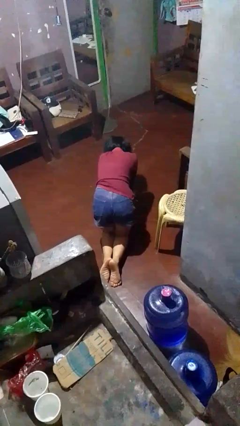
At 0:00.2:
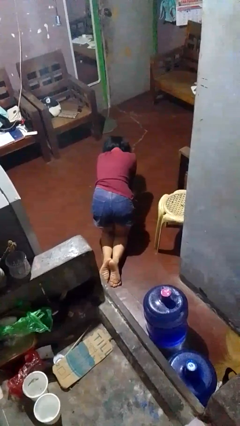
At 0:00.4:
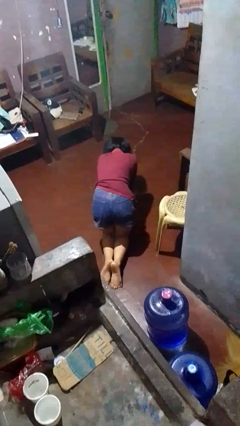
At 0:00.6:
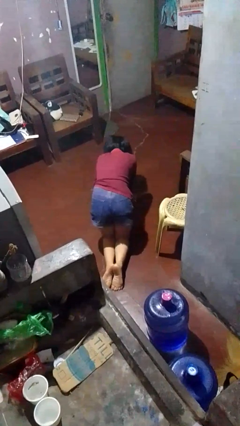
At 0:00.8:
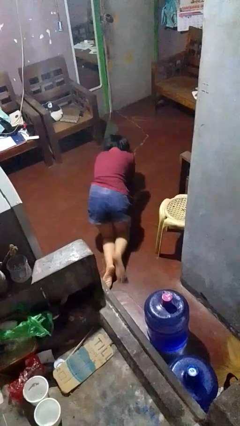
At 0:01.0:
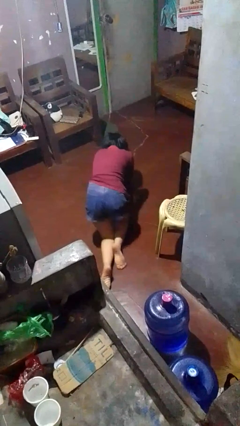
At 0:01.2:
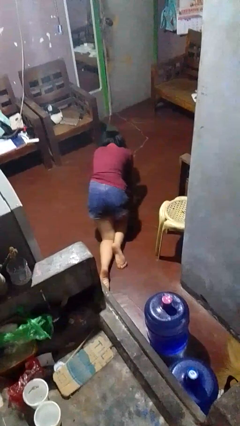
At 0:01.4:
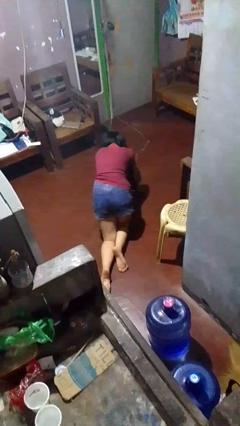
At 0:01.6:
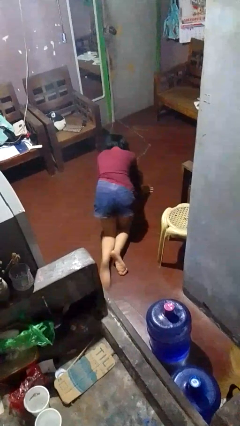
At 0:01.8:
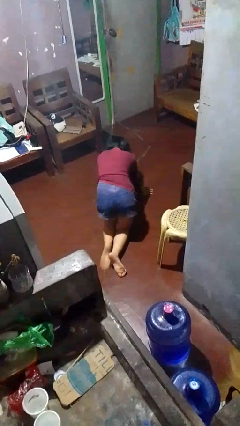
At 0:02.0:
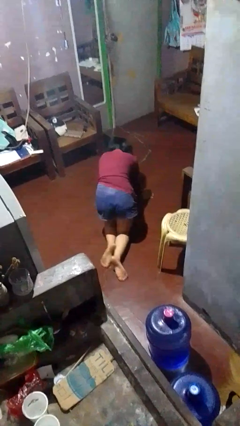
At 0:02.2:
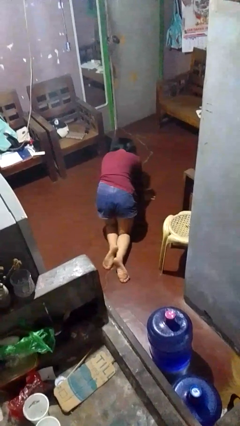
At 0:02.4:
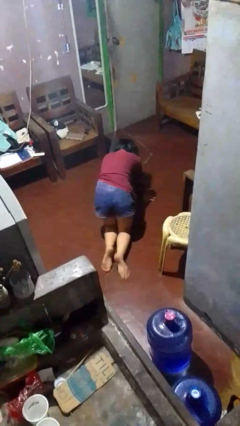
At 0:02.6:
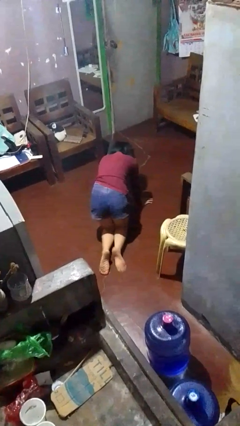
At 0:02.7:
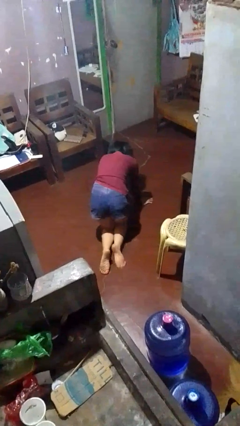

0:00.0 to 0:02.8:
person crawls

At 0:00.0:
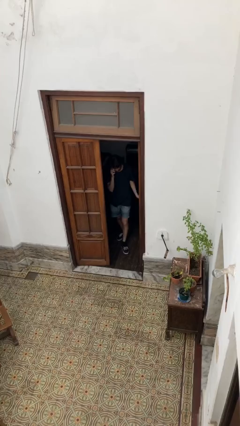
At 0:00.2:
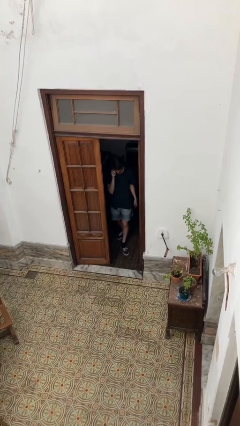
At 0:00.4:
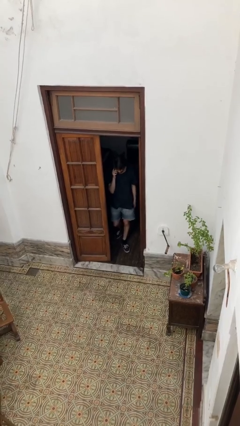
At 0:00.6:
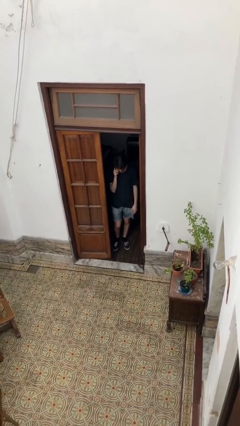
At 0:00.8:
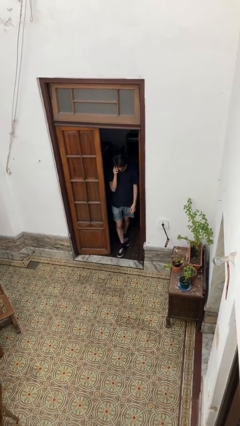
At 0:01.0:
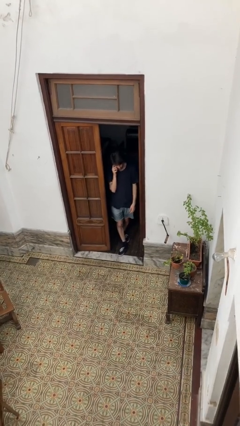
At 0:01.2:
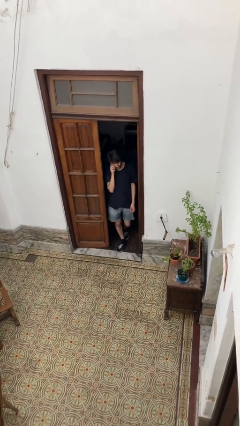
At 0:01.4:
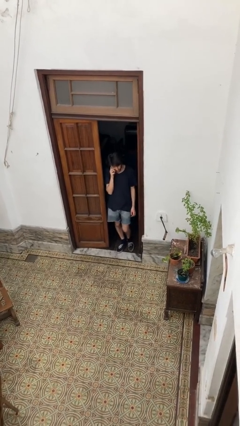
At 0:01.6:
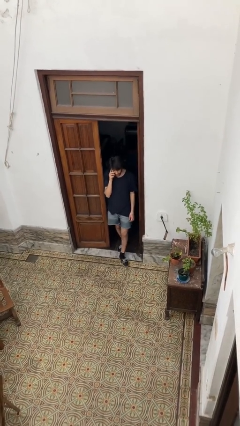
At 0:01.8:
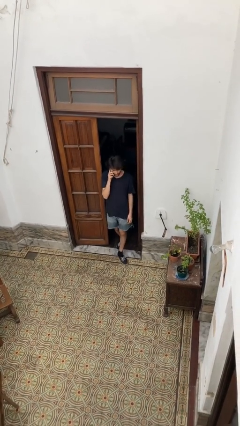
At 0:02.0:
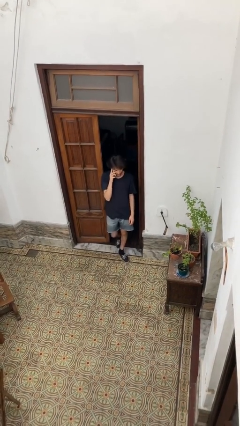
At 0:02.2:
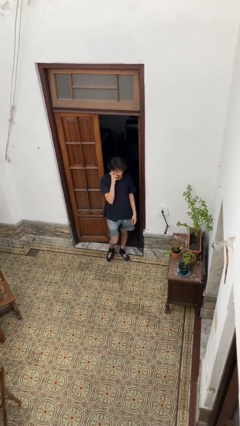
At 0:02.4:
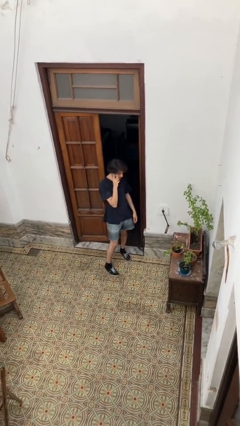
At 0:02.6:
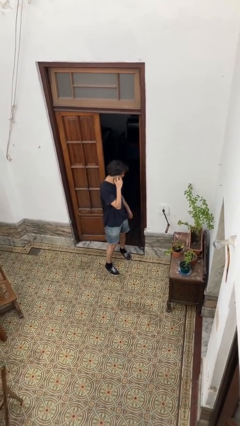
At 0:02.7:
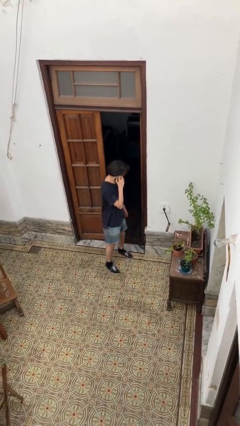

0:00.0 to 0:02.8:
person enters scene through structure

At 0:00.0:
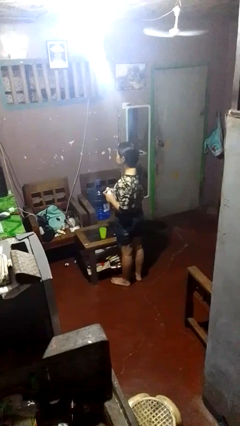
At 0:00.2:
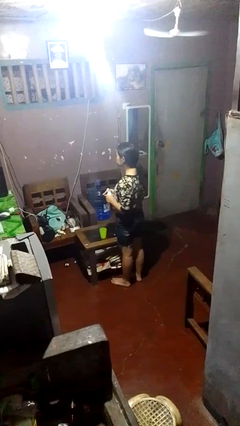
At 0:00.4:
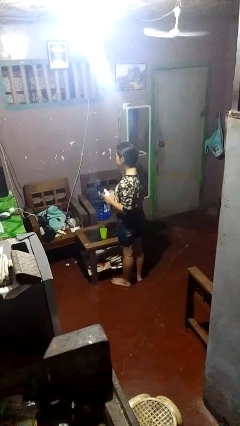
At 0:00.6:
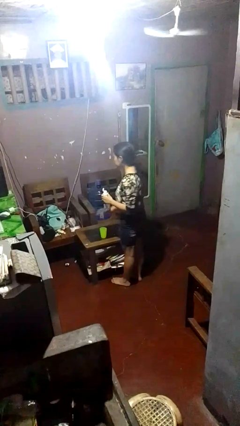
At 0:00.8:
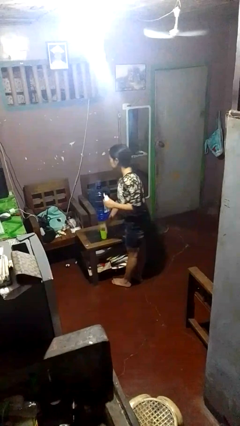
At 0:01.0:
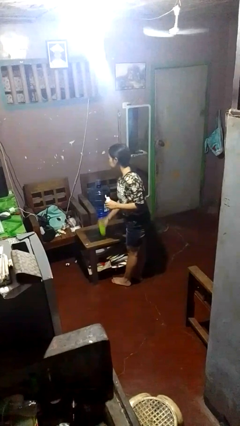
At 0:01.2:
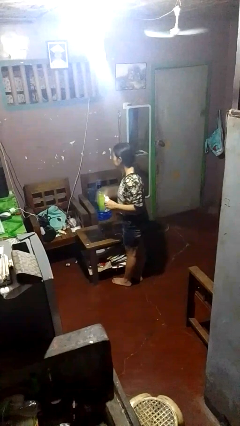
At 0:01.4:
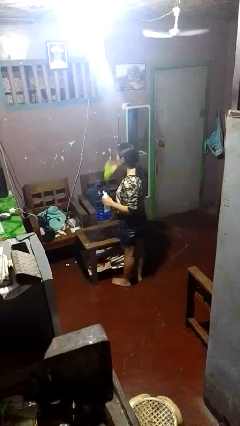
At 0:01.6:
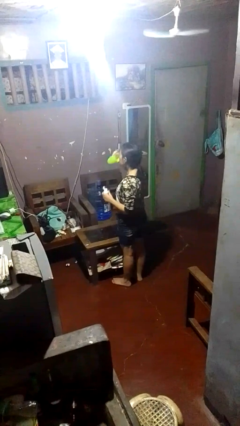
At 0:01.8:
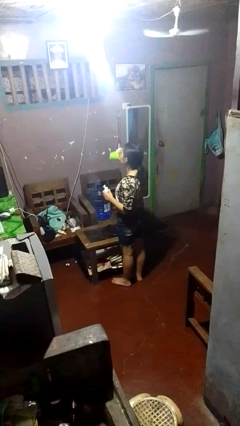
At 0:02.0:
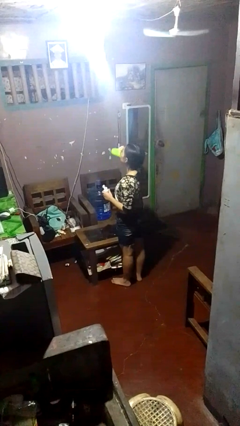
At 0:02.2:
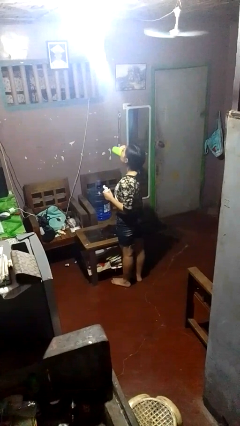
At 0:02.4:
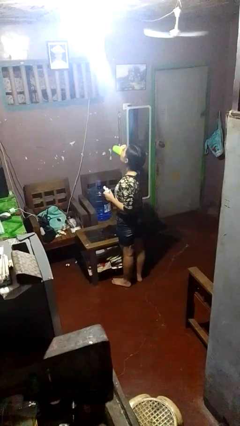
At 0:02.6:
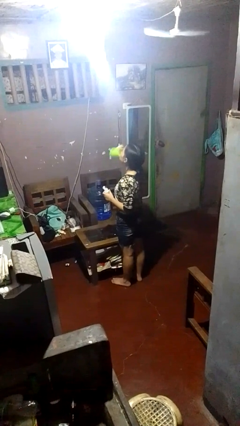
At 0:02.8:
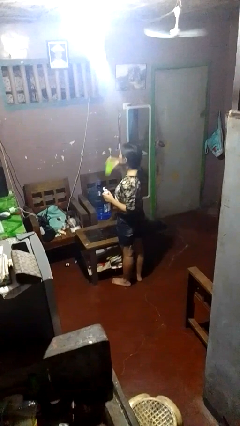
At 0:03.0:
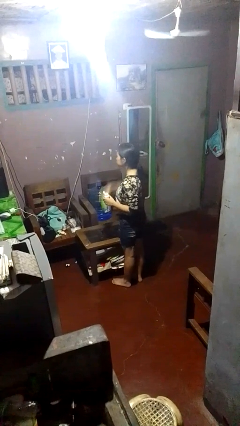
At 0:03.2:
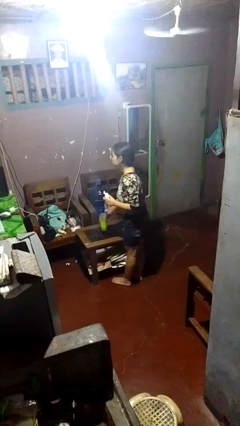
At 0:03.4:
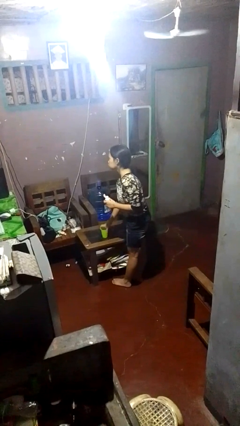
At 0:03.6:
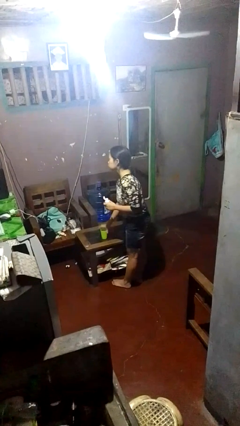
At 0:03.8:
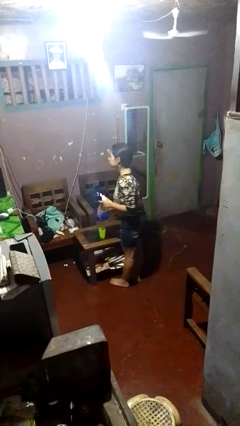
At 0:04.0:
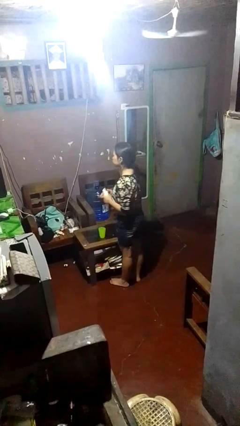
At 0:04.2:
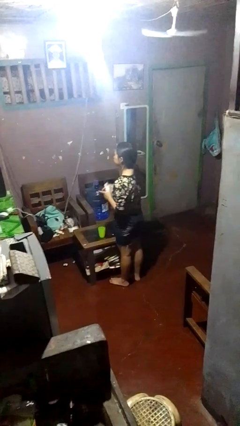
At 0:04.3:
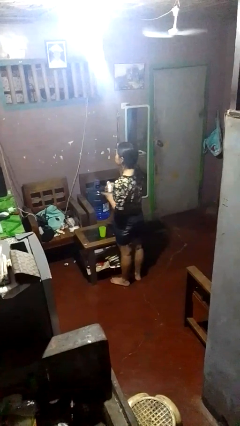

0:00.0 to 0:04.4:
person drinks from cup

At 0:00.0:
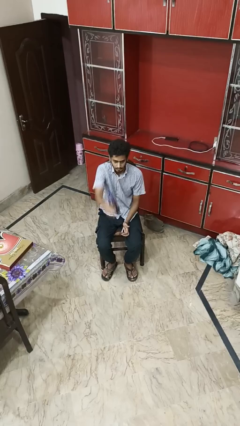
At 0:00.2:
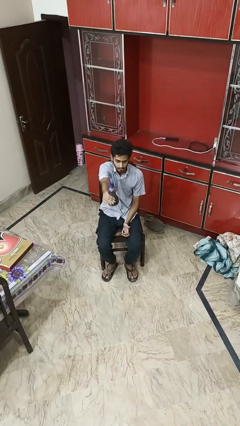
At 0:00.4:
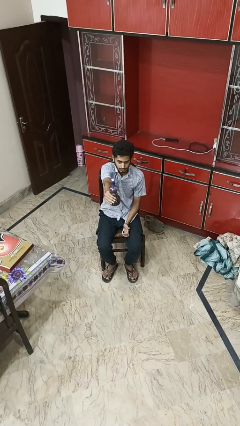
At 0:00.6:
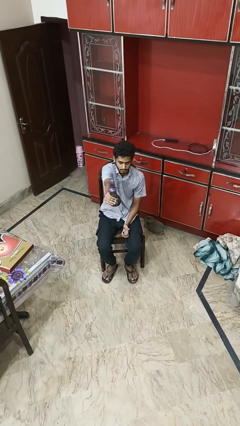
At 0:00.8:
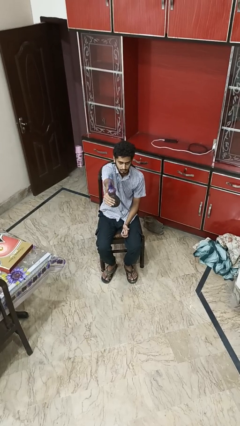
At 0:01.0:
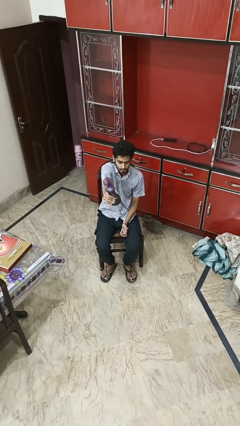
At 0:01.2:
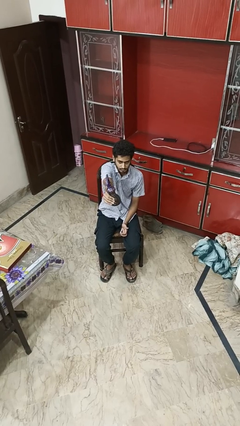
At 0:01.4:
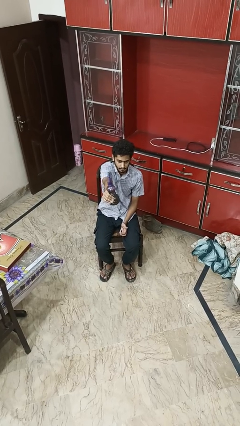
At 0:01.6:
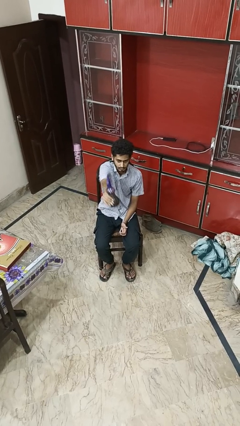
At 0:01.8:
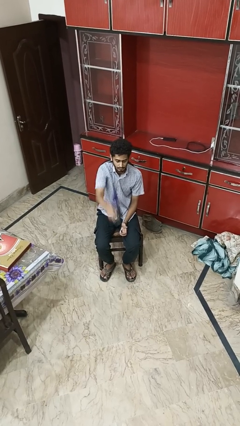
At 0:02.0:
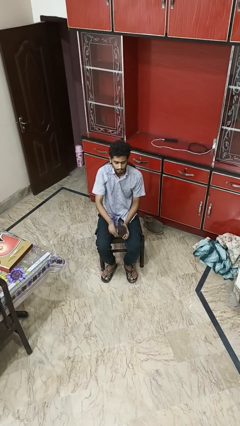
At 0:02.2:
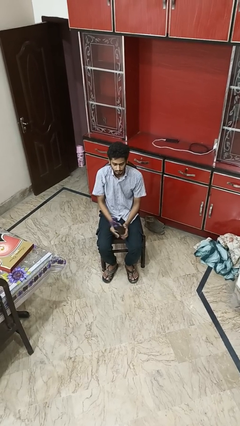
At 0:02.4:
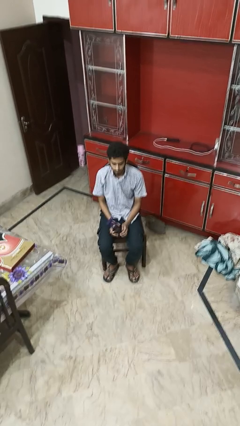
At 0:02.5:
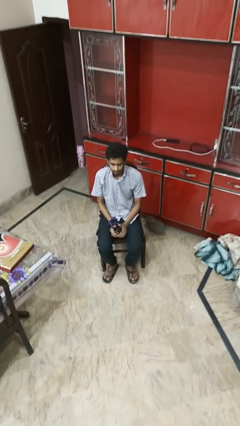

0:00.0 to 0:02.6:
person squeezes object

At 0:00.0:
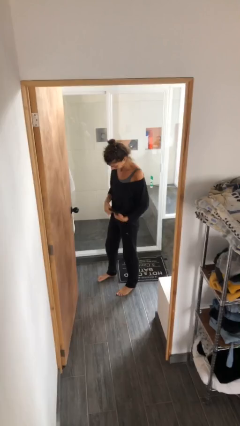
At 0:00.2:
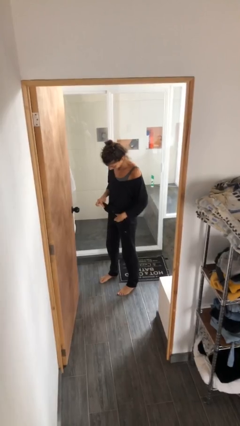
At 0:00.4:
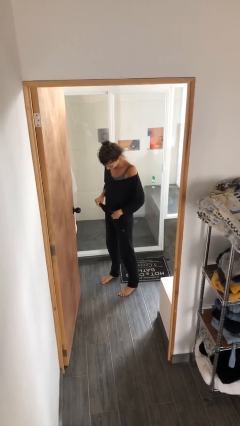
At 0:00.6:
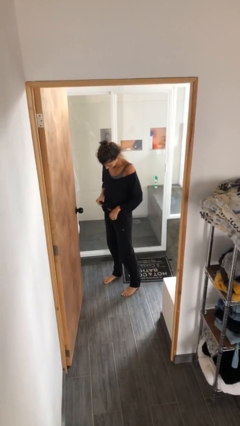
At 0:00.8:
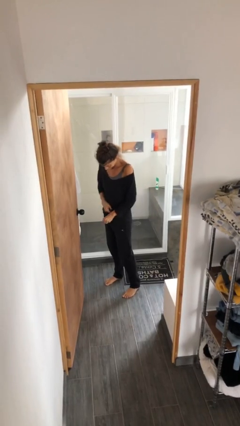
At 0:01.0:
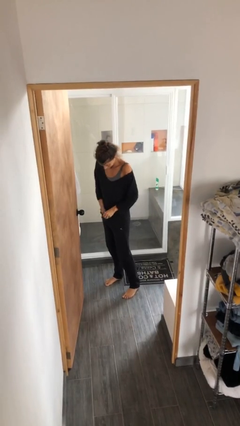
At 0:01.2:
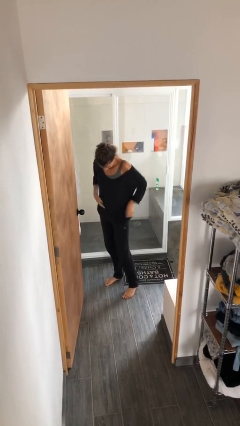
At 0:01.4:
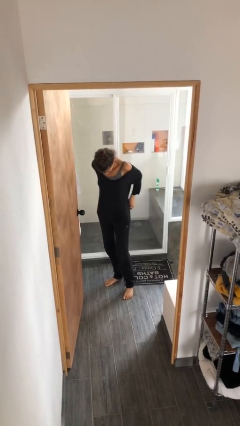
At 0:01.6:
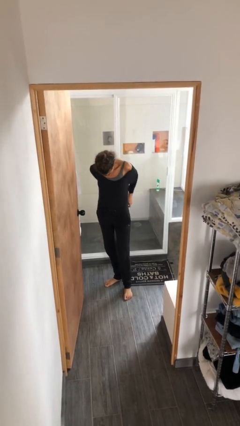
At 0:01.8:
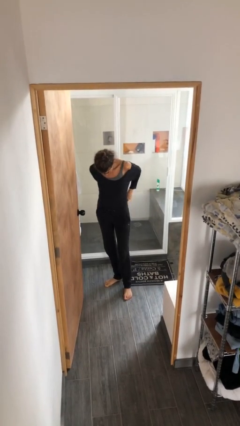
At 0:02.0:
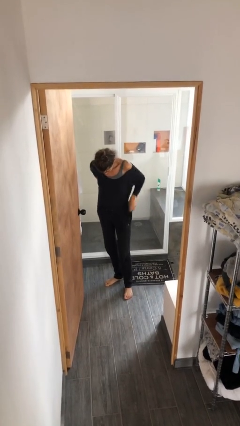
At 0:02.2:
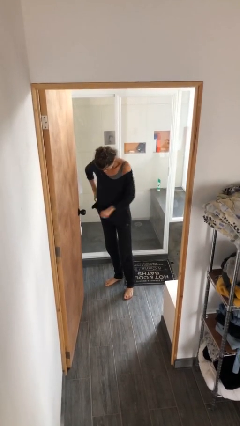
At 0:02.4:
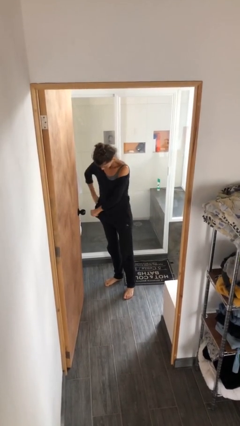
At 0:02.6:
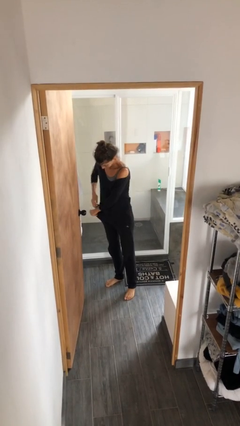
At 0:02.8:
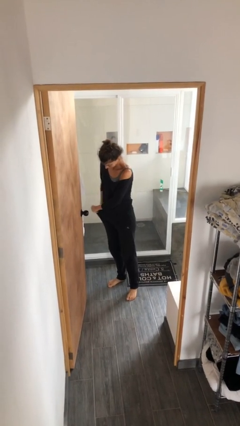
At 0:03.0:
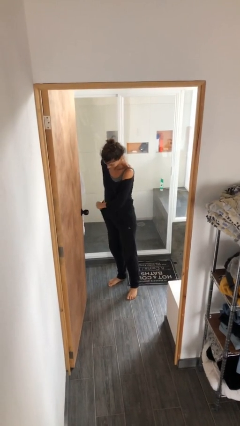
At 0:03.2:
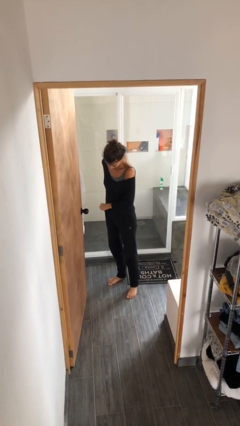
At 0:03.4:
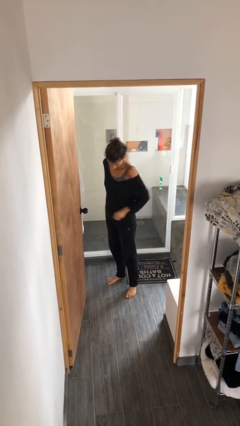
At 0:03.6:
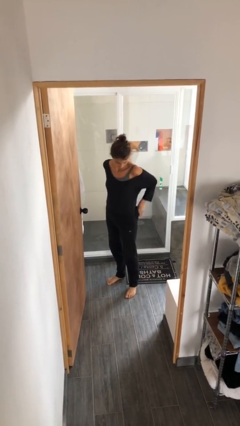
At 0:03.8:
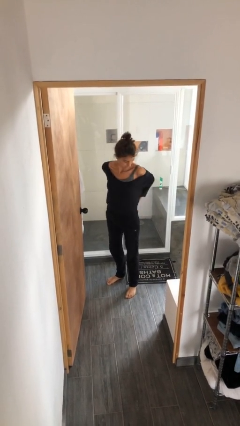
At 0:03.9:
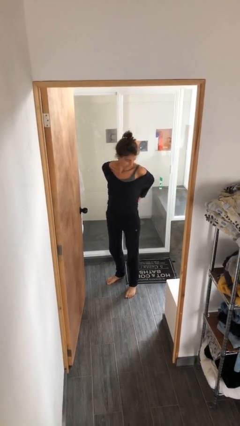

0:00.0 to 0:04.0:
person tucks in shirt

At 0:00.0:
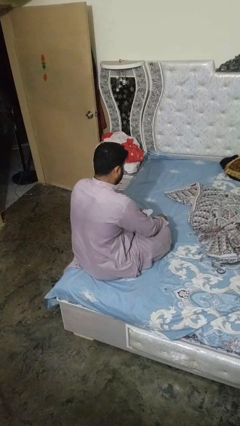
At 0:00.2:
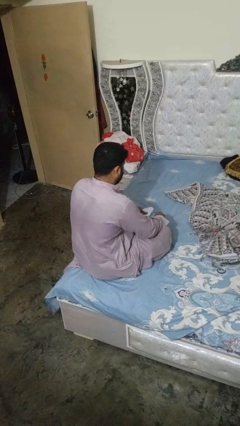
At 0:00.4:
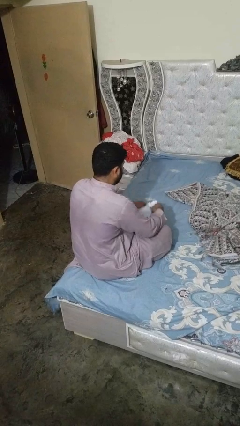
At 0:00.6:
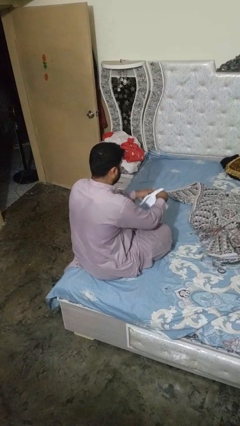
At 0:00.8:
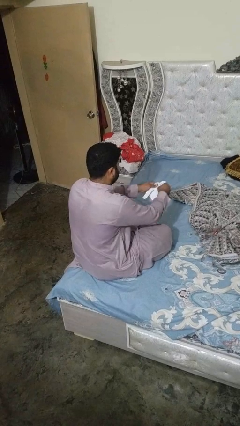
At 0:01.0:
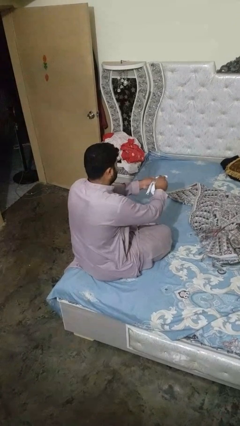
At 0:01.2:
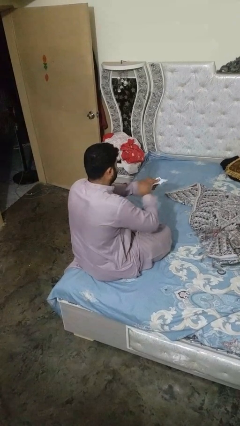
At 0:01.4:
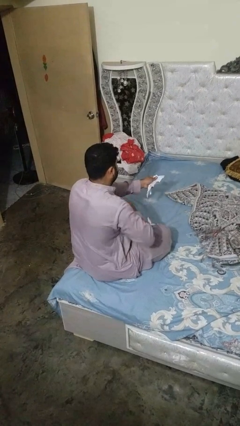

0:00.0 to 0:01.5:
person tears paper
